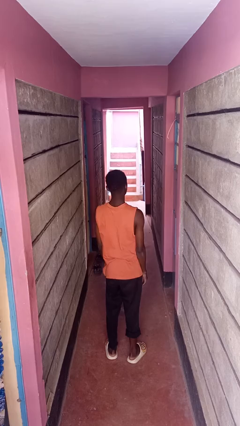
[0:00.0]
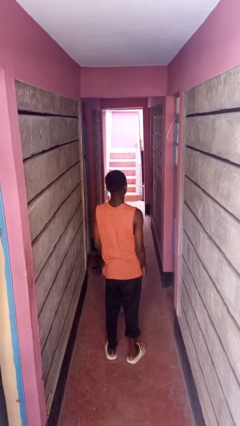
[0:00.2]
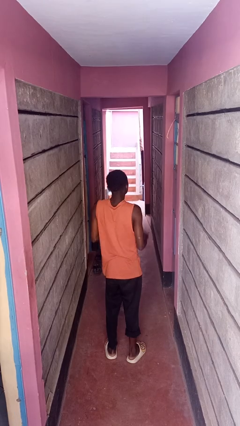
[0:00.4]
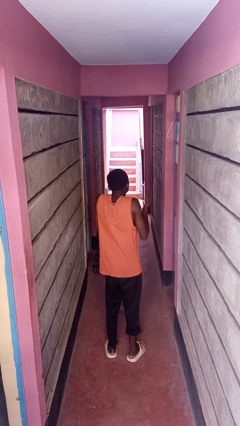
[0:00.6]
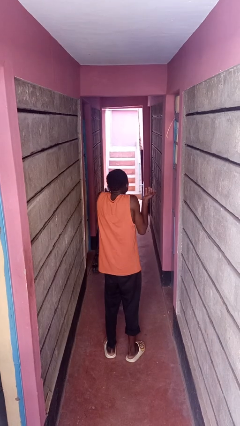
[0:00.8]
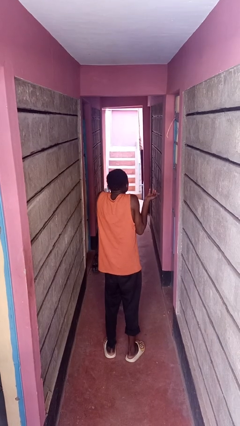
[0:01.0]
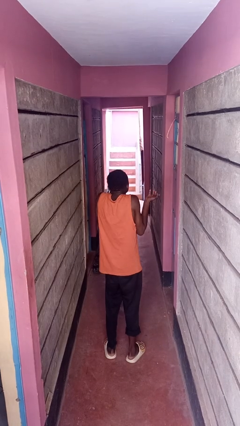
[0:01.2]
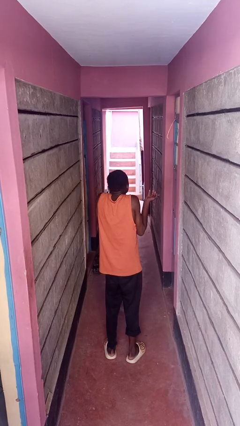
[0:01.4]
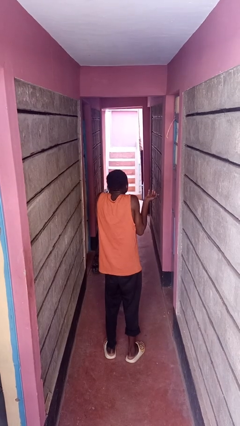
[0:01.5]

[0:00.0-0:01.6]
person shrugs

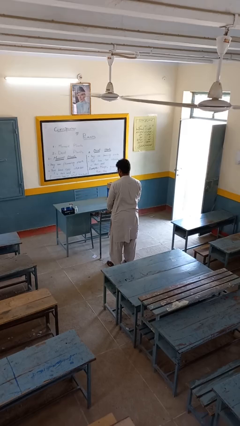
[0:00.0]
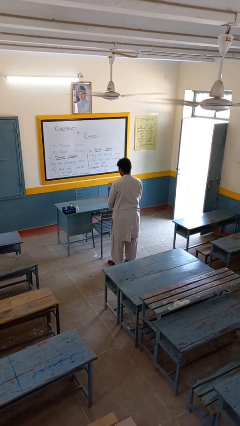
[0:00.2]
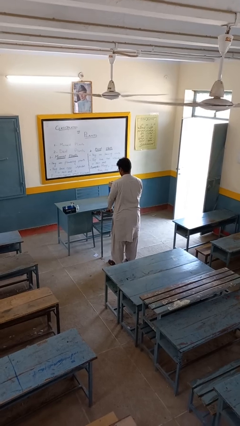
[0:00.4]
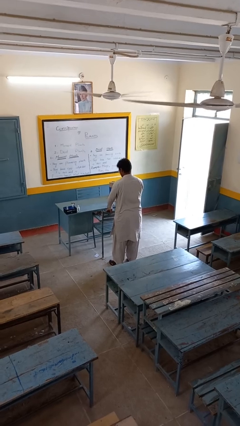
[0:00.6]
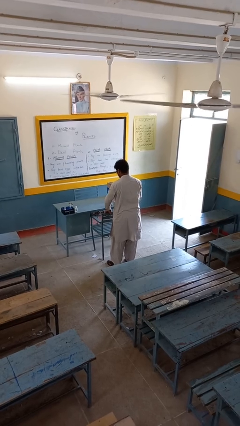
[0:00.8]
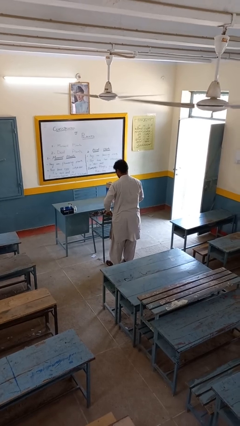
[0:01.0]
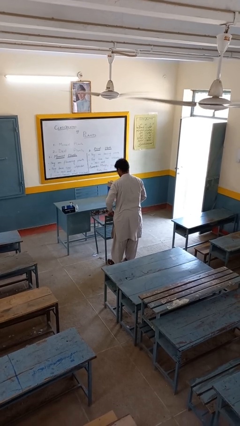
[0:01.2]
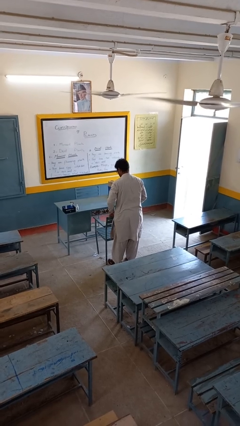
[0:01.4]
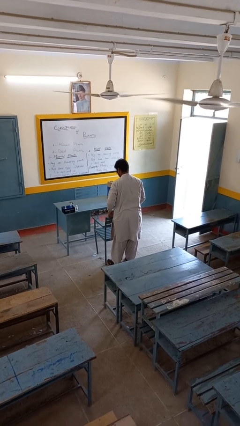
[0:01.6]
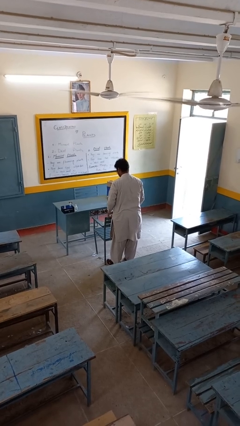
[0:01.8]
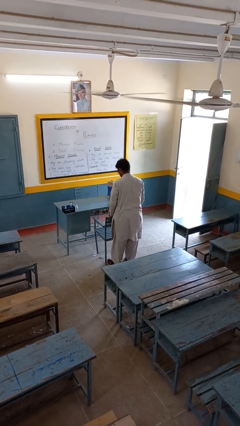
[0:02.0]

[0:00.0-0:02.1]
person pulls out chair

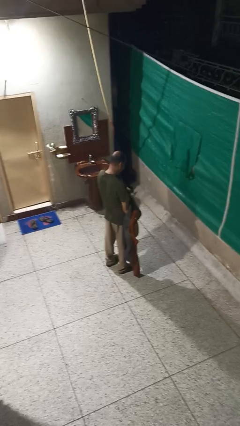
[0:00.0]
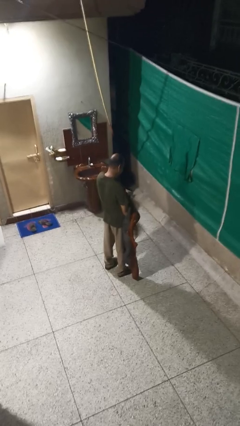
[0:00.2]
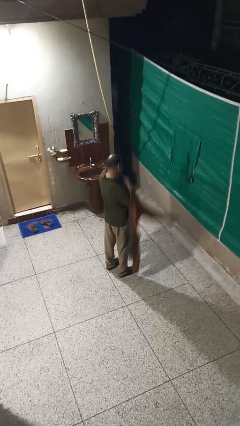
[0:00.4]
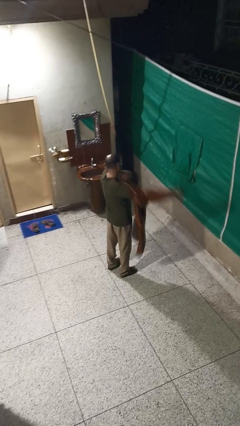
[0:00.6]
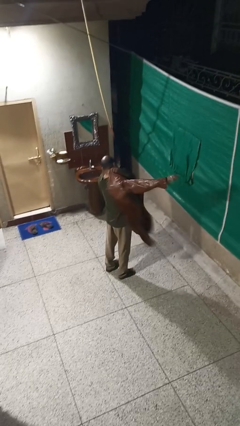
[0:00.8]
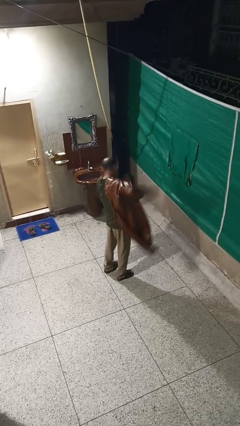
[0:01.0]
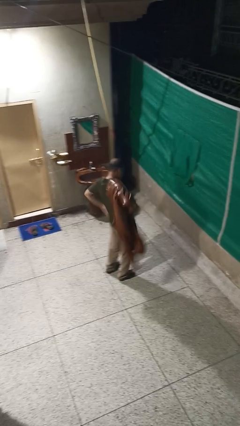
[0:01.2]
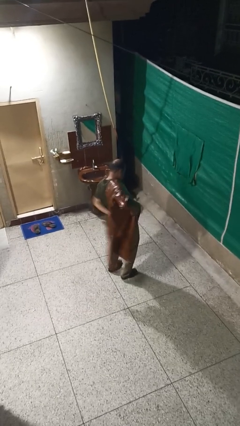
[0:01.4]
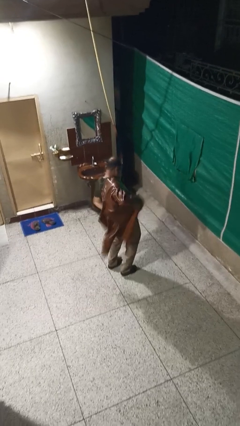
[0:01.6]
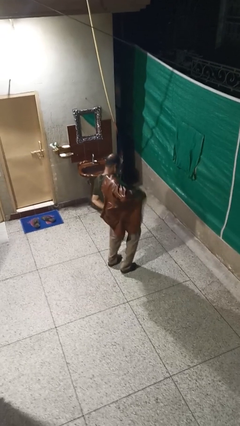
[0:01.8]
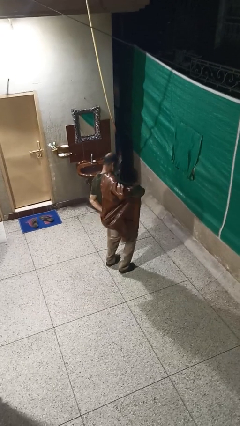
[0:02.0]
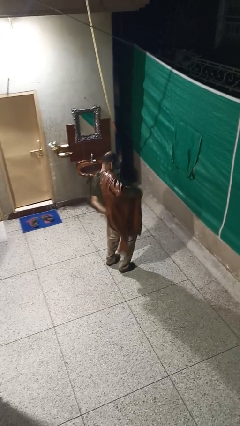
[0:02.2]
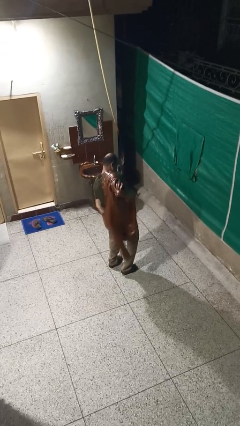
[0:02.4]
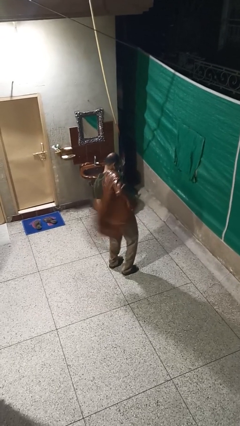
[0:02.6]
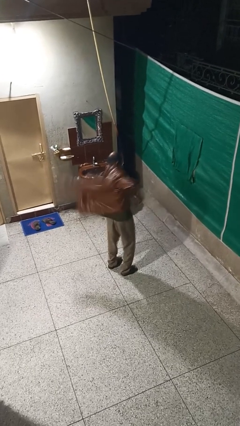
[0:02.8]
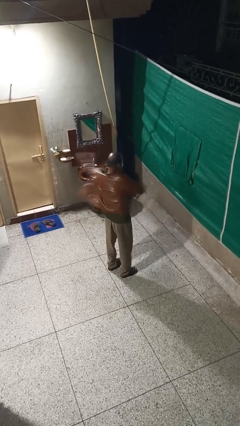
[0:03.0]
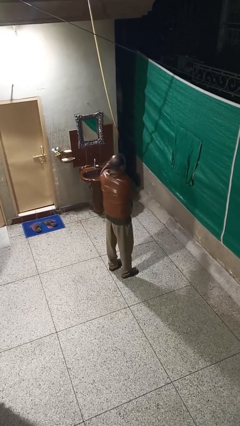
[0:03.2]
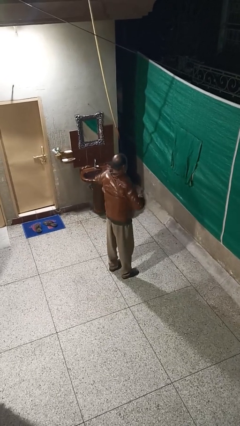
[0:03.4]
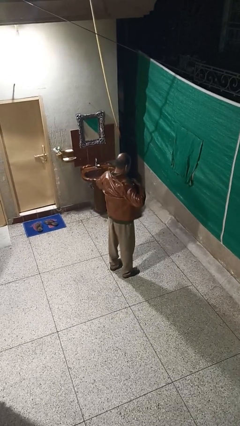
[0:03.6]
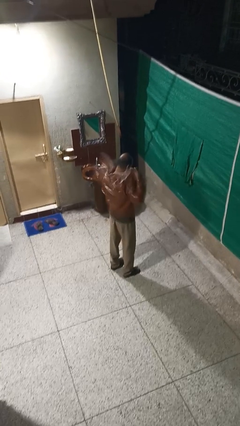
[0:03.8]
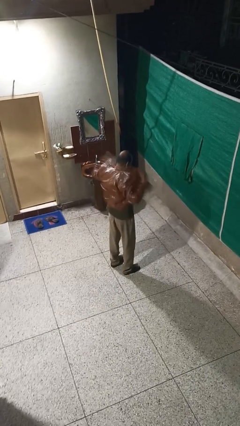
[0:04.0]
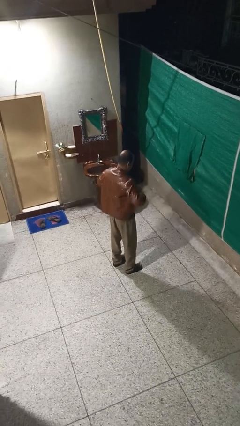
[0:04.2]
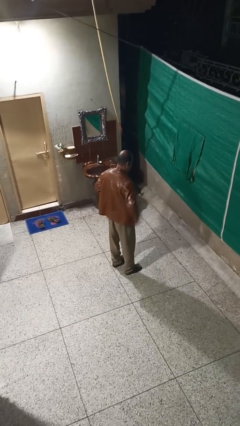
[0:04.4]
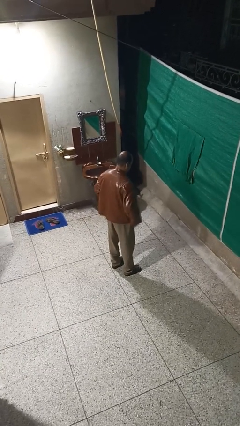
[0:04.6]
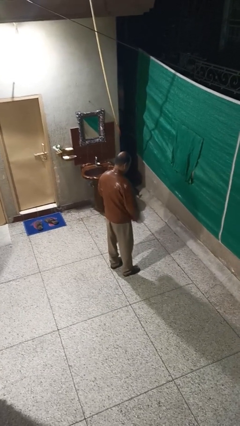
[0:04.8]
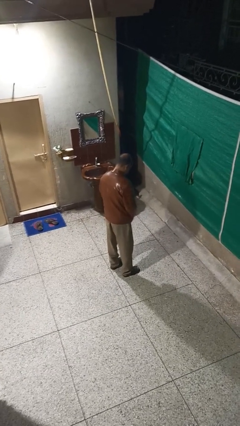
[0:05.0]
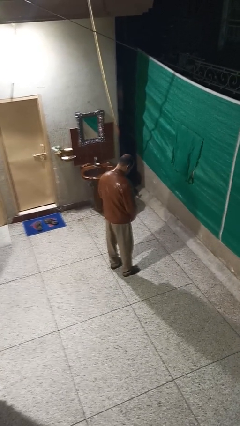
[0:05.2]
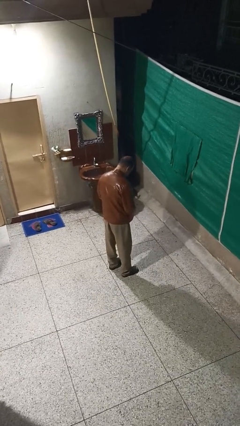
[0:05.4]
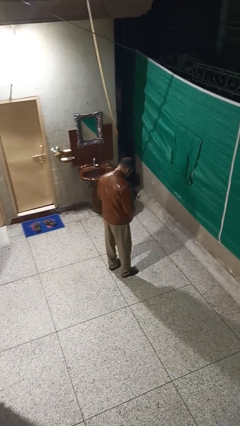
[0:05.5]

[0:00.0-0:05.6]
person puts on jacket

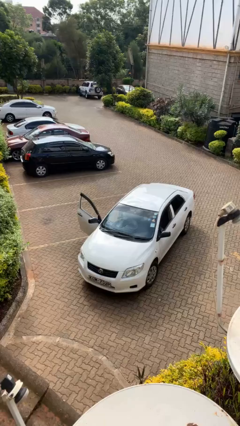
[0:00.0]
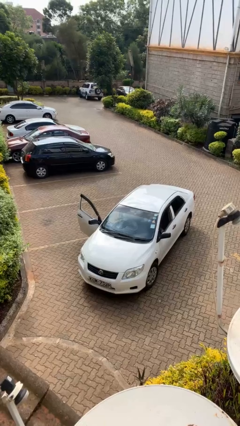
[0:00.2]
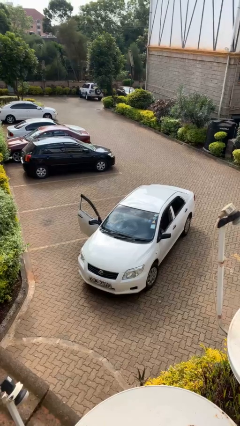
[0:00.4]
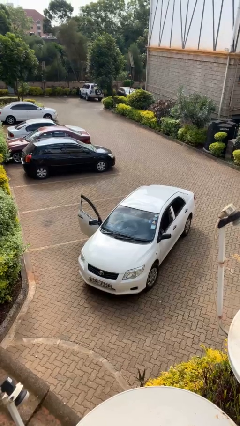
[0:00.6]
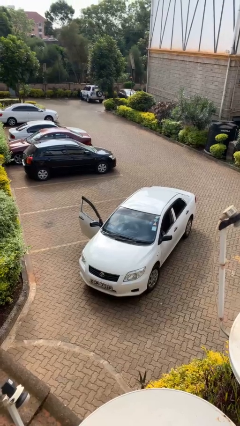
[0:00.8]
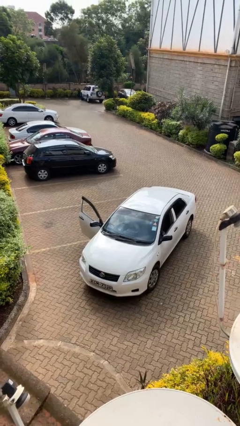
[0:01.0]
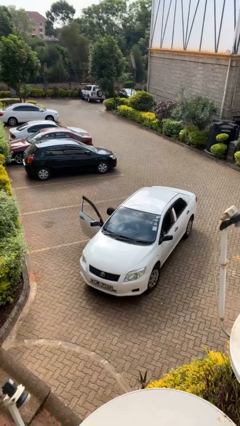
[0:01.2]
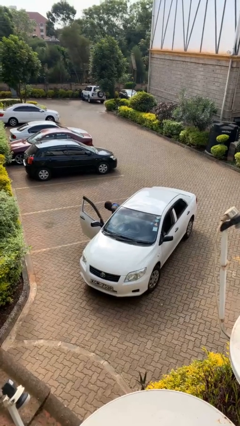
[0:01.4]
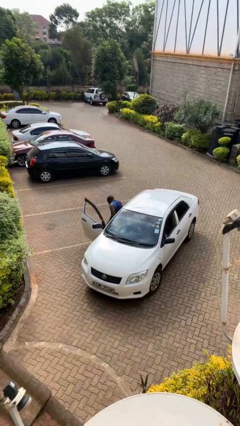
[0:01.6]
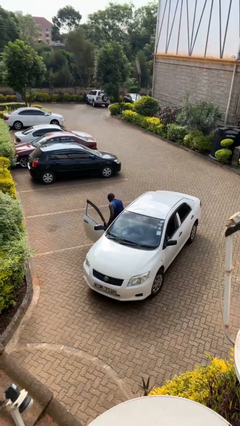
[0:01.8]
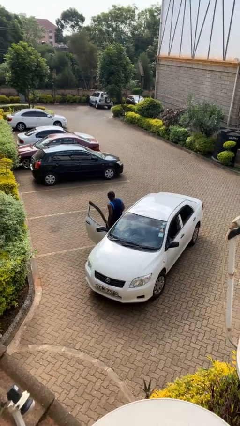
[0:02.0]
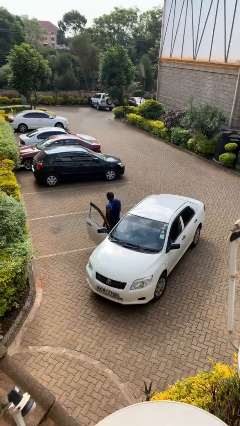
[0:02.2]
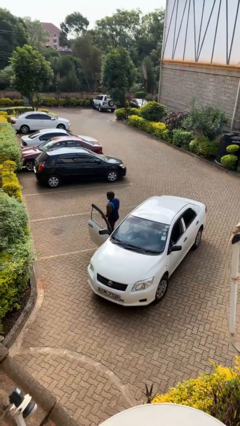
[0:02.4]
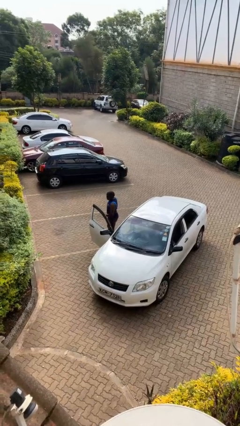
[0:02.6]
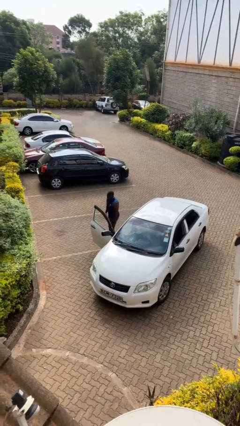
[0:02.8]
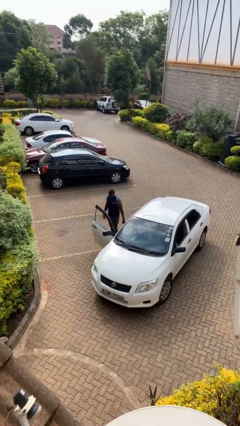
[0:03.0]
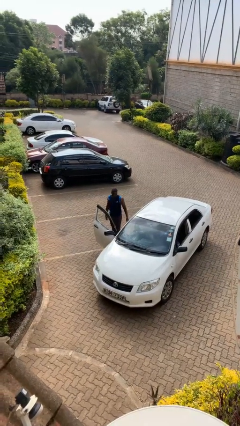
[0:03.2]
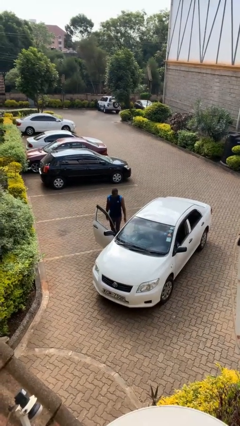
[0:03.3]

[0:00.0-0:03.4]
person exits car

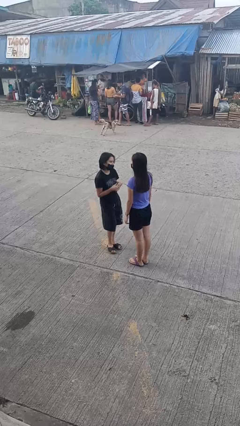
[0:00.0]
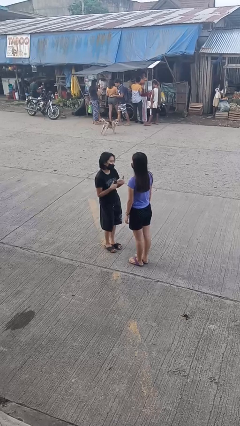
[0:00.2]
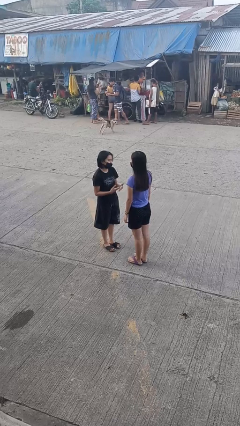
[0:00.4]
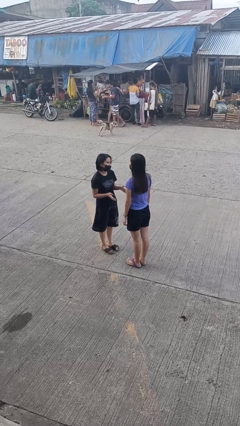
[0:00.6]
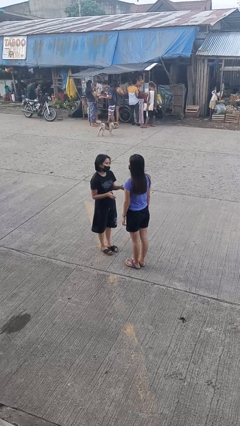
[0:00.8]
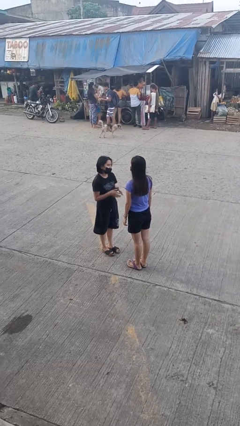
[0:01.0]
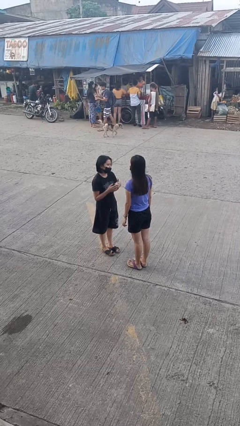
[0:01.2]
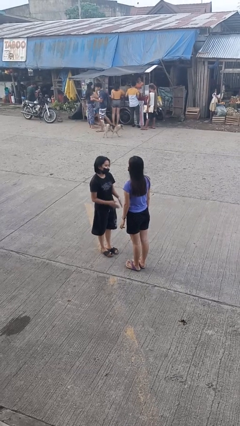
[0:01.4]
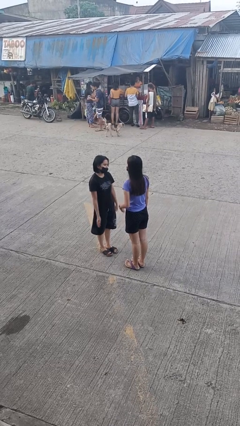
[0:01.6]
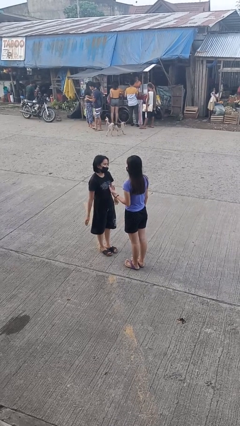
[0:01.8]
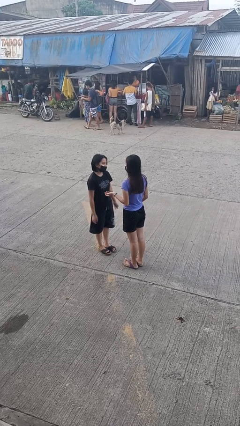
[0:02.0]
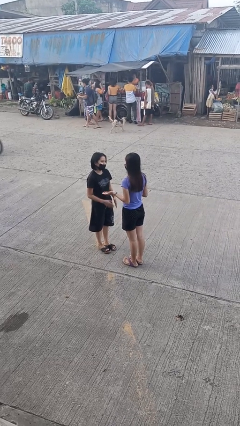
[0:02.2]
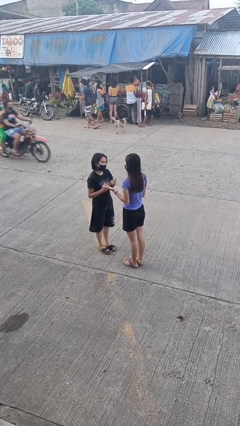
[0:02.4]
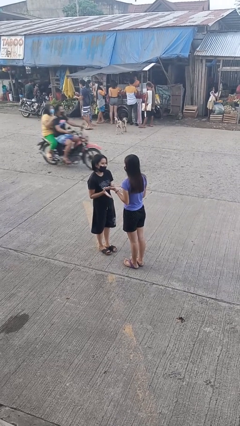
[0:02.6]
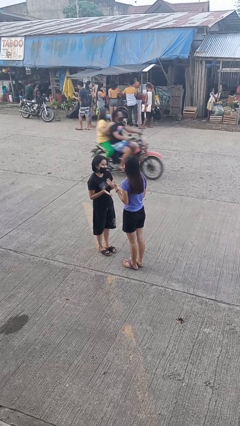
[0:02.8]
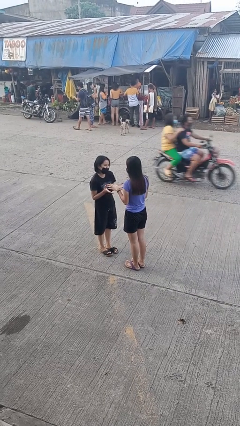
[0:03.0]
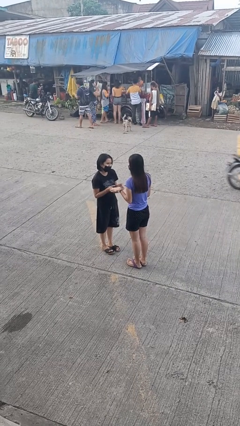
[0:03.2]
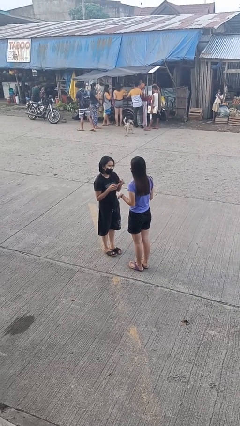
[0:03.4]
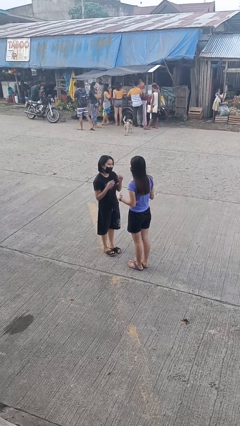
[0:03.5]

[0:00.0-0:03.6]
person talks to person

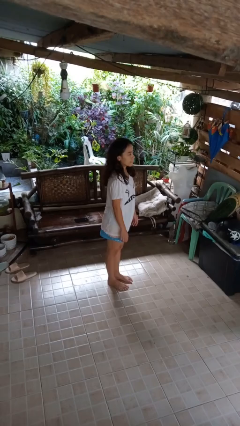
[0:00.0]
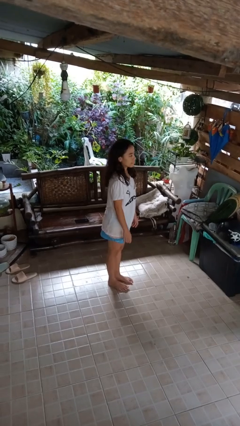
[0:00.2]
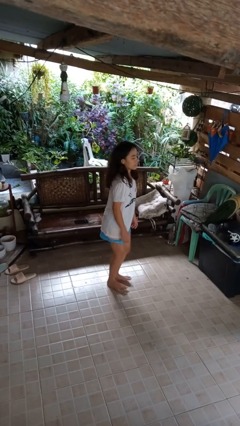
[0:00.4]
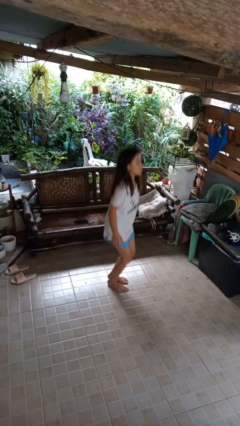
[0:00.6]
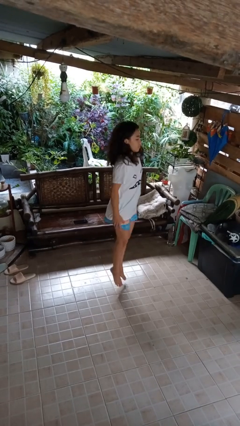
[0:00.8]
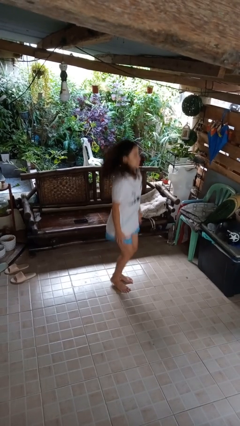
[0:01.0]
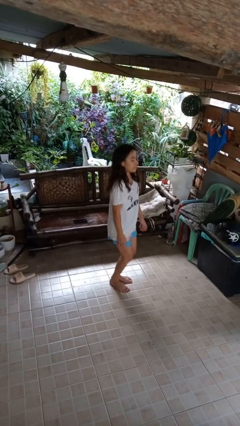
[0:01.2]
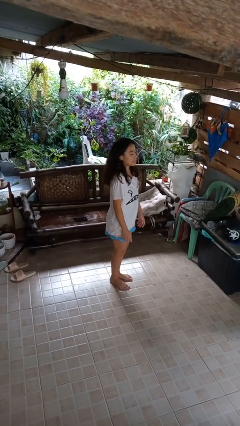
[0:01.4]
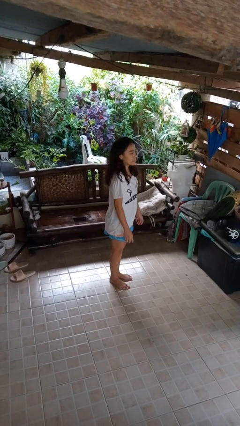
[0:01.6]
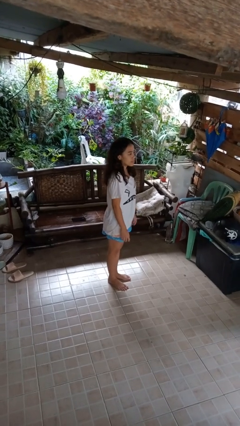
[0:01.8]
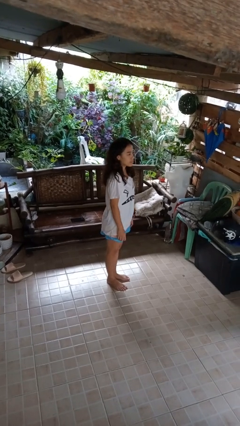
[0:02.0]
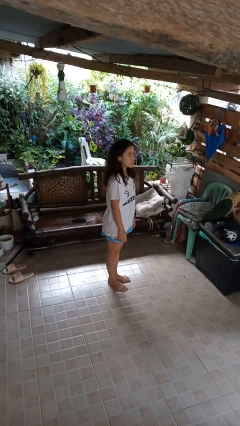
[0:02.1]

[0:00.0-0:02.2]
person jumps
